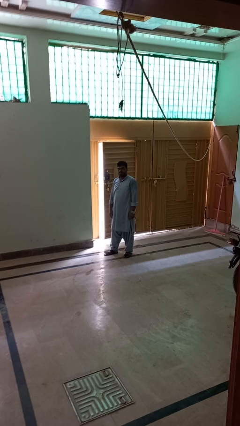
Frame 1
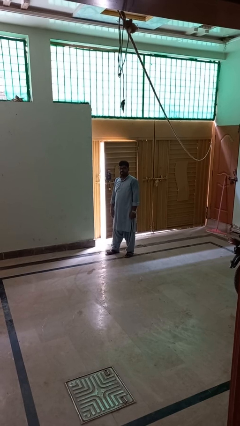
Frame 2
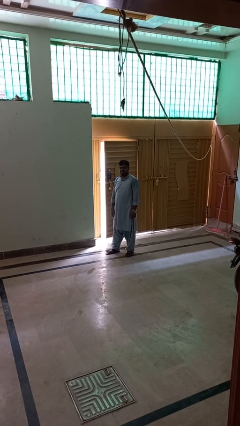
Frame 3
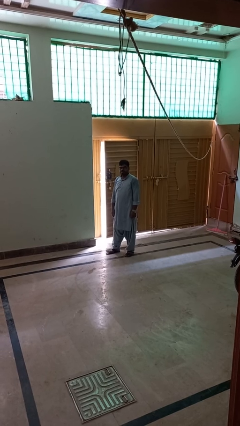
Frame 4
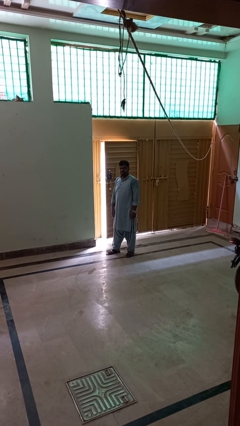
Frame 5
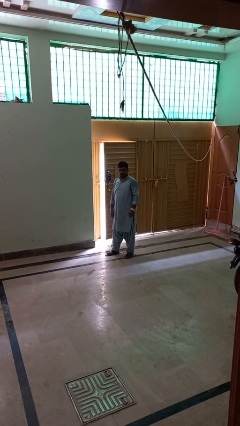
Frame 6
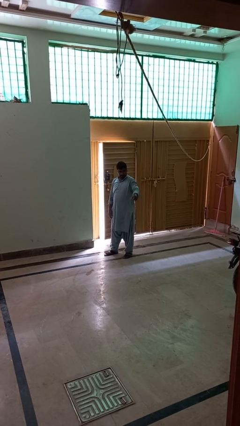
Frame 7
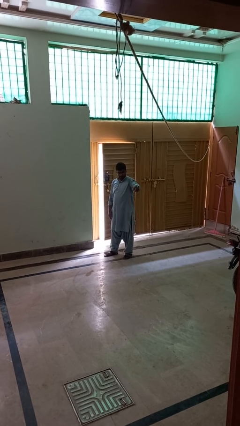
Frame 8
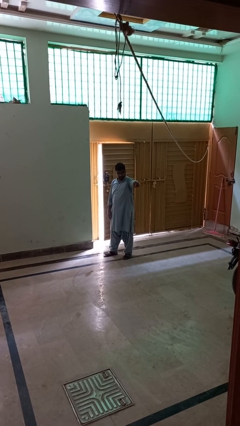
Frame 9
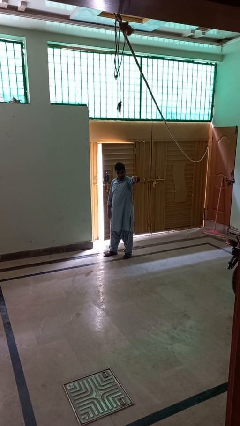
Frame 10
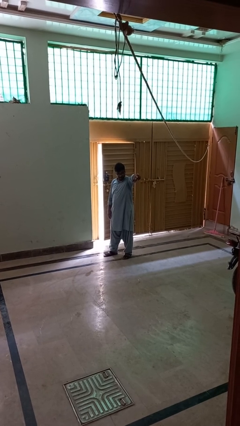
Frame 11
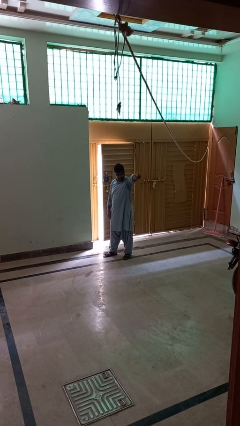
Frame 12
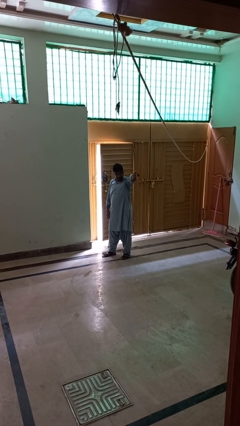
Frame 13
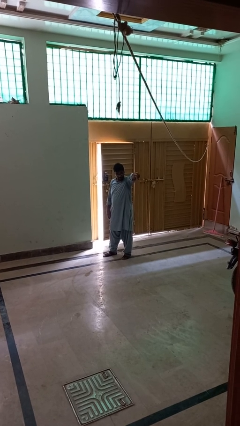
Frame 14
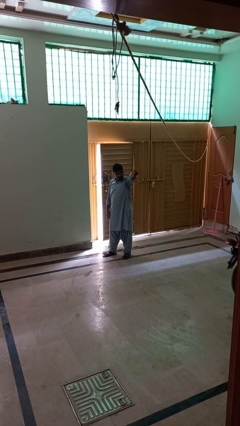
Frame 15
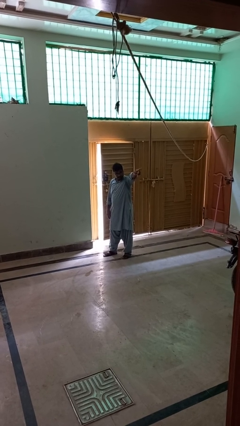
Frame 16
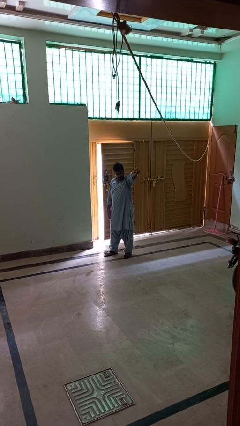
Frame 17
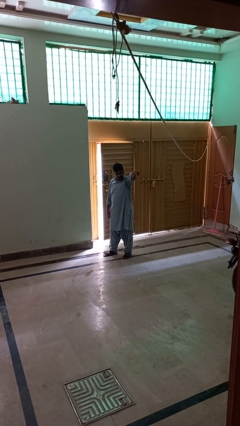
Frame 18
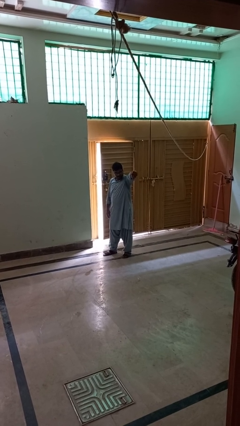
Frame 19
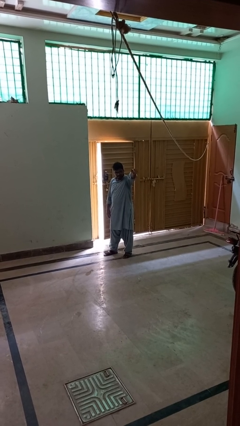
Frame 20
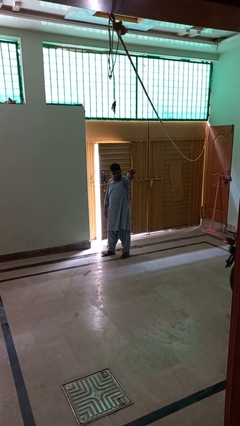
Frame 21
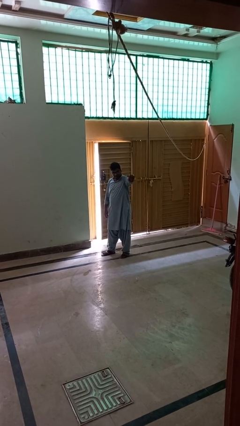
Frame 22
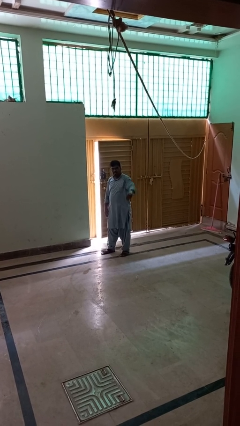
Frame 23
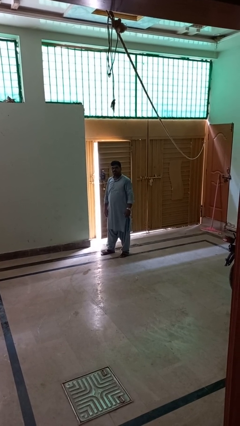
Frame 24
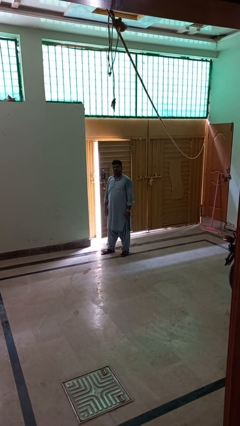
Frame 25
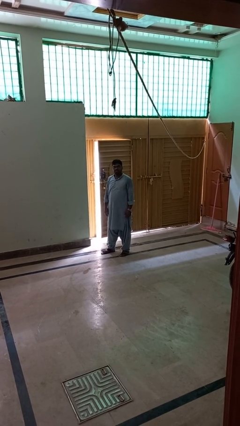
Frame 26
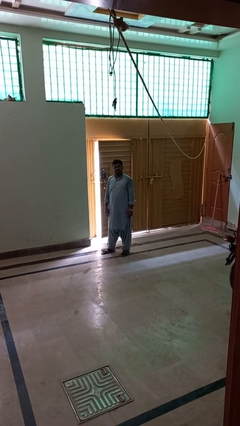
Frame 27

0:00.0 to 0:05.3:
person gestures come here

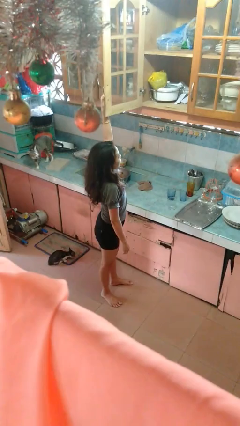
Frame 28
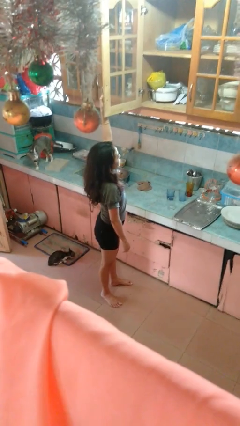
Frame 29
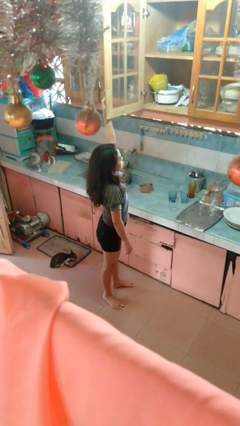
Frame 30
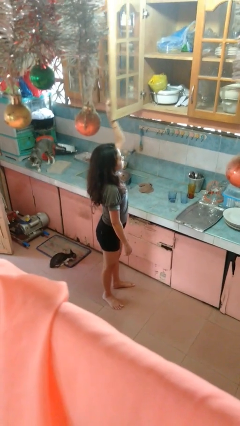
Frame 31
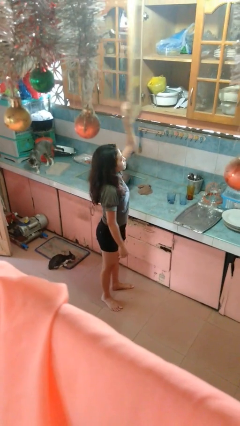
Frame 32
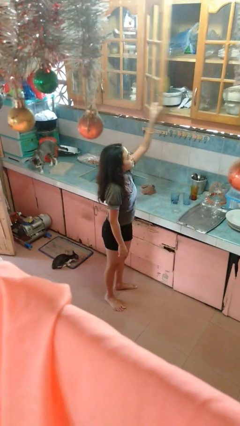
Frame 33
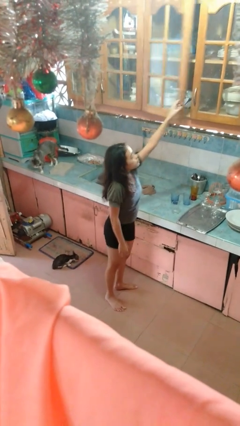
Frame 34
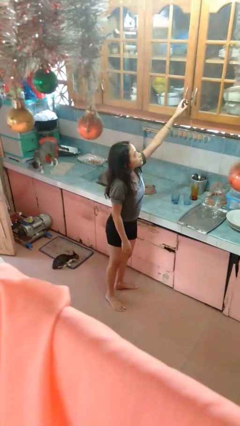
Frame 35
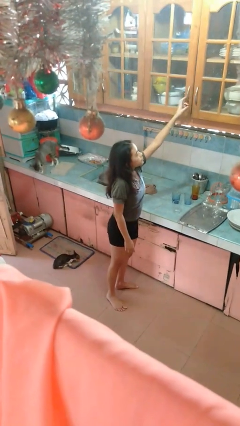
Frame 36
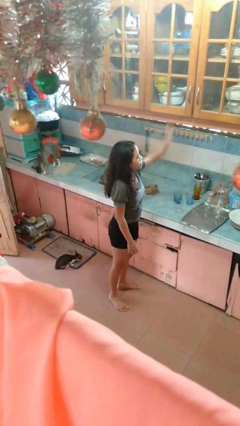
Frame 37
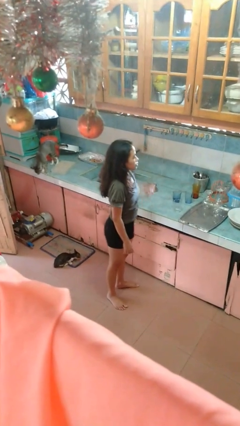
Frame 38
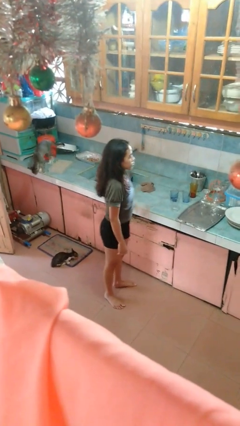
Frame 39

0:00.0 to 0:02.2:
person closes cabinet

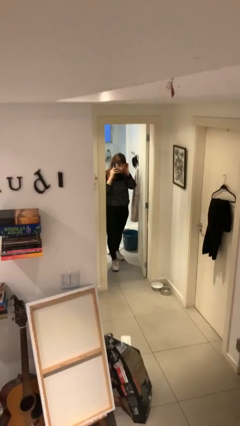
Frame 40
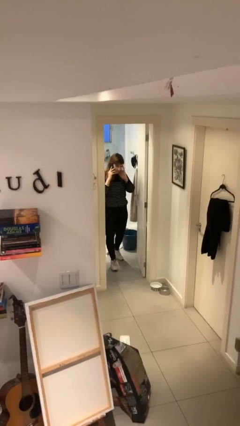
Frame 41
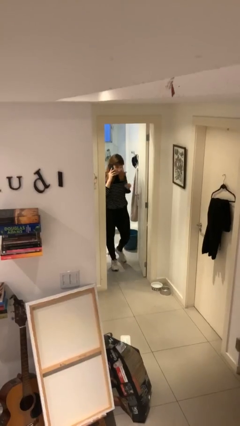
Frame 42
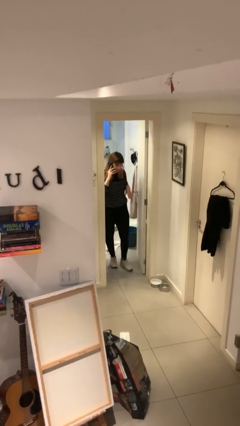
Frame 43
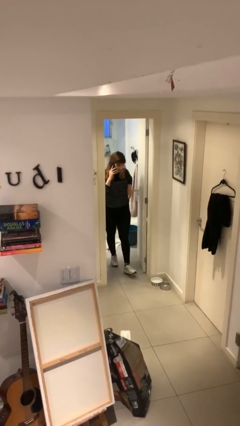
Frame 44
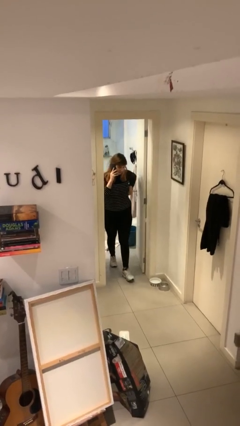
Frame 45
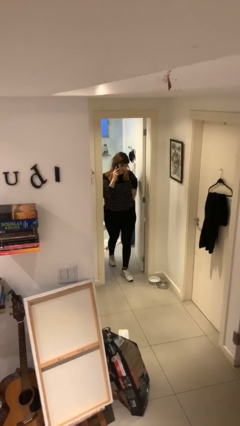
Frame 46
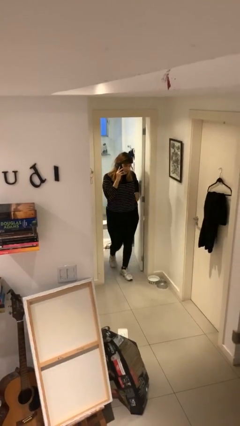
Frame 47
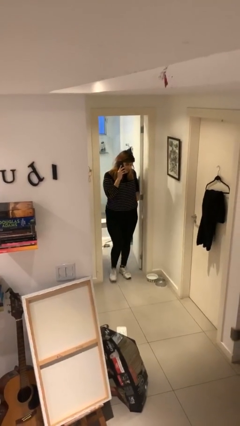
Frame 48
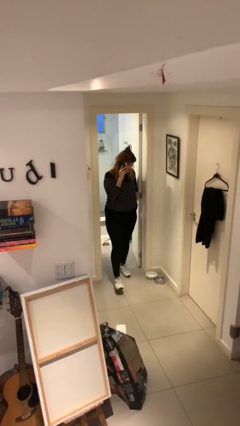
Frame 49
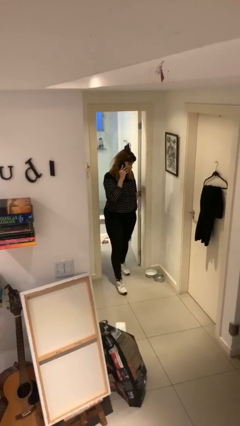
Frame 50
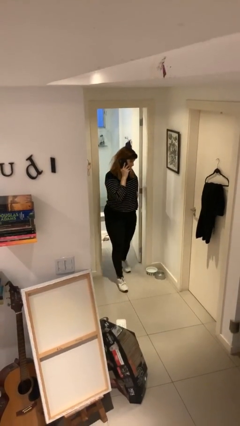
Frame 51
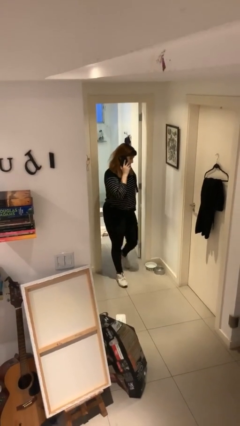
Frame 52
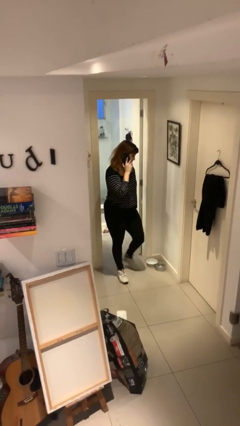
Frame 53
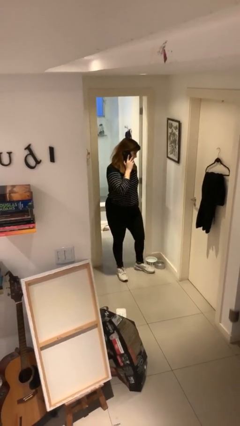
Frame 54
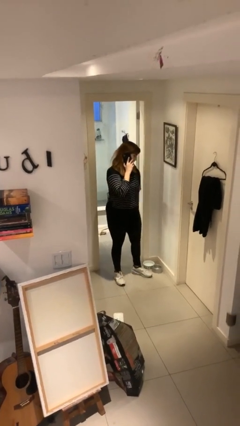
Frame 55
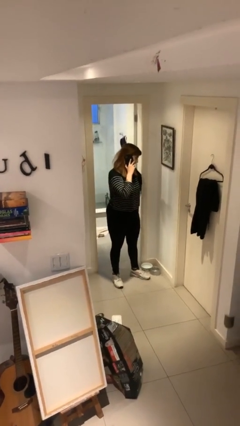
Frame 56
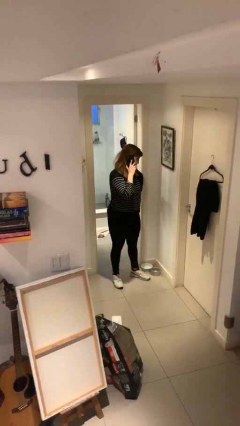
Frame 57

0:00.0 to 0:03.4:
person enters scene through structure

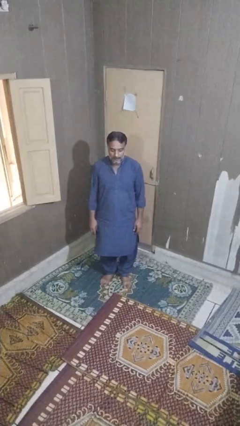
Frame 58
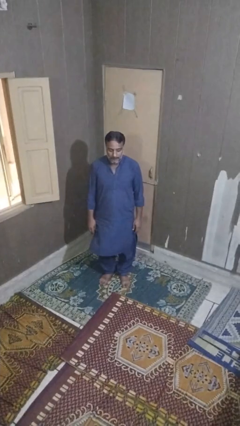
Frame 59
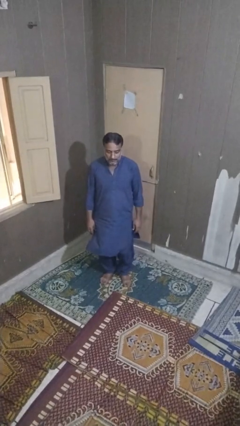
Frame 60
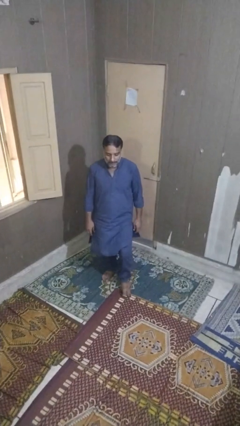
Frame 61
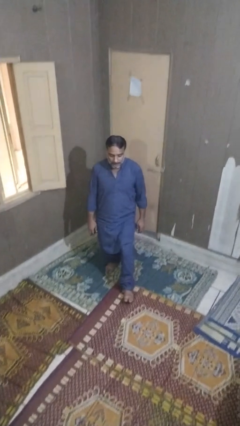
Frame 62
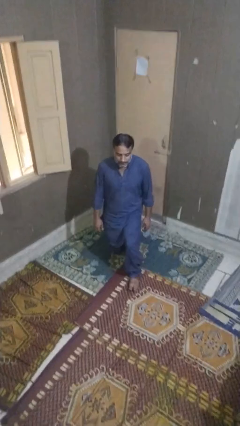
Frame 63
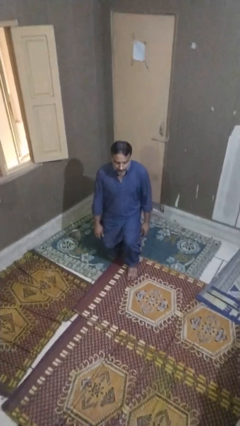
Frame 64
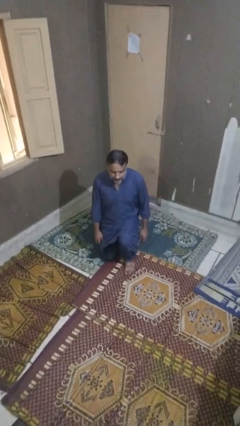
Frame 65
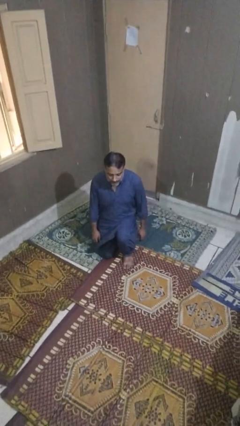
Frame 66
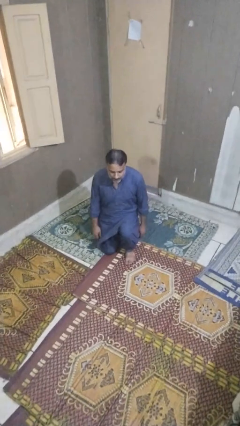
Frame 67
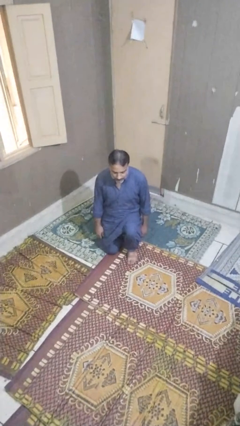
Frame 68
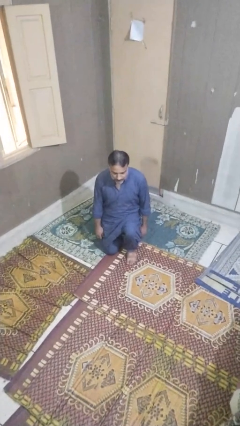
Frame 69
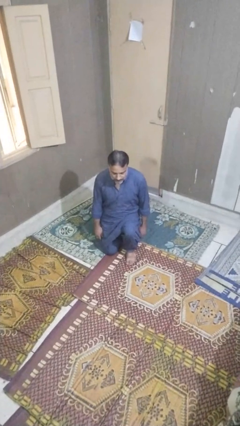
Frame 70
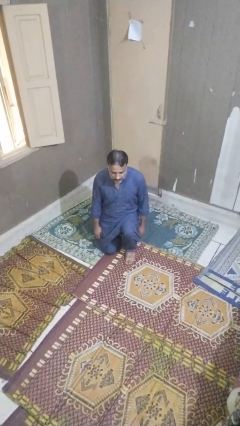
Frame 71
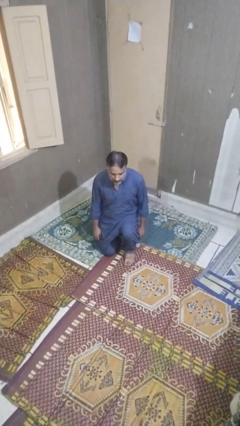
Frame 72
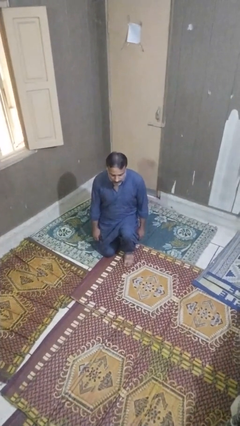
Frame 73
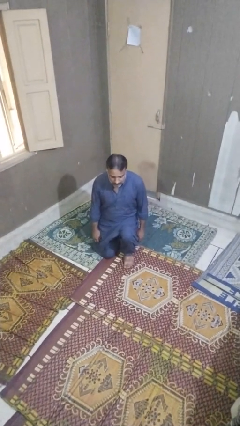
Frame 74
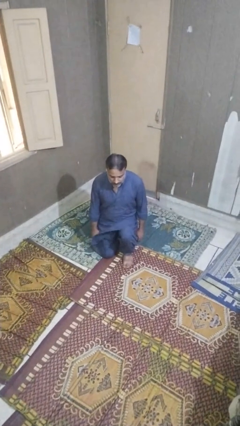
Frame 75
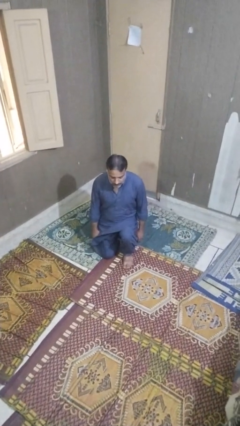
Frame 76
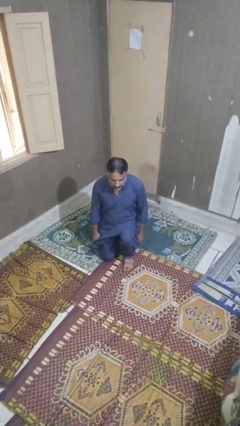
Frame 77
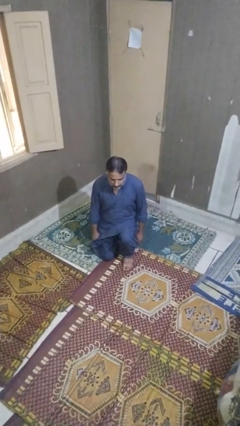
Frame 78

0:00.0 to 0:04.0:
person exercises with lunges

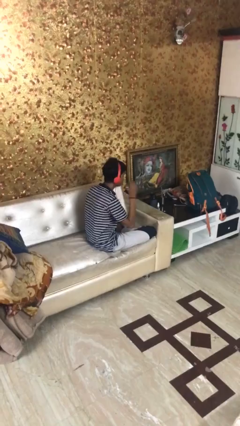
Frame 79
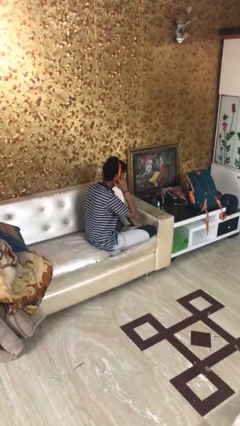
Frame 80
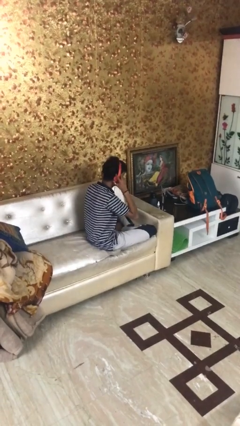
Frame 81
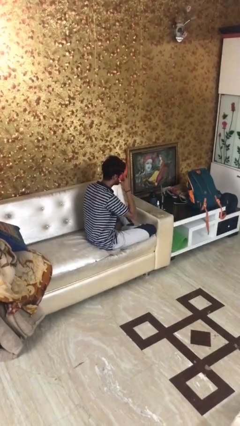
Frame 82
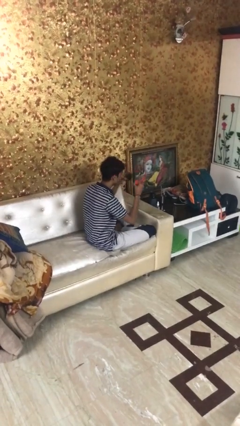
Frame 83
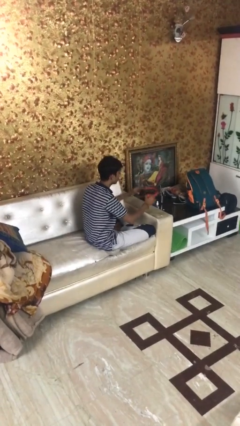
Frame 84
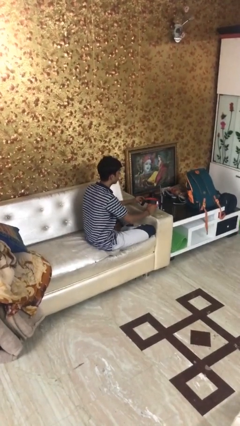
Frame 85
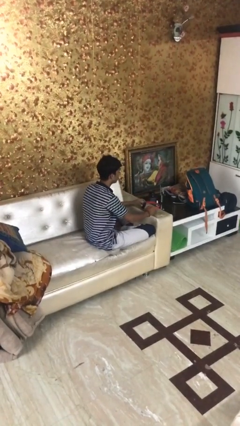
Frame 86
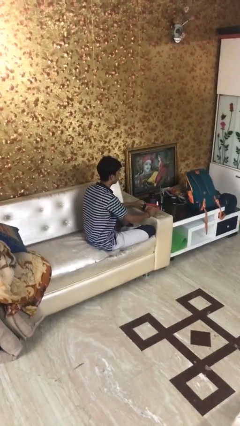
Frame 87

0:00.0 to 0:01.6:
person takes off headphones

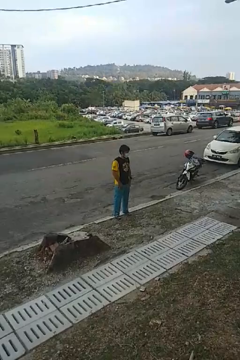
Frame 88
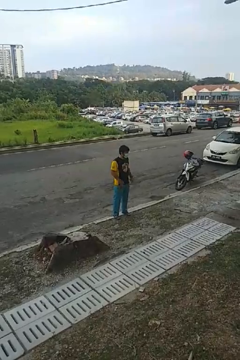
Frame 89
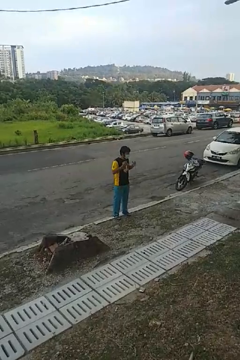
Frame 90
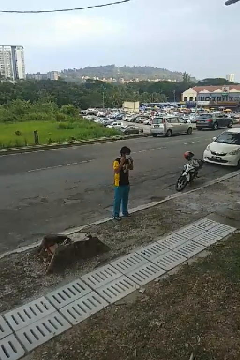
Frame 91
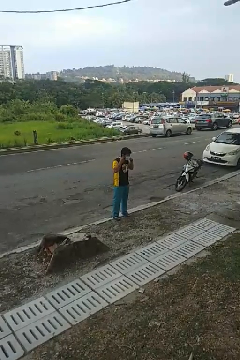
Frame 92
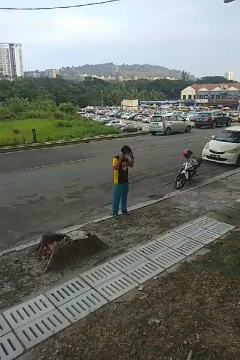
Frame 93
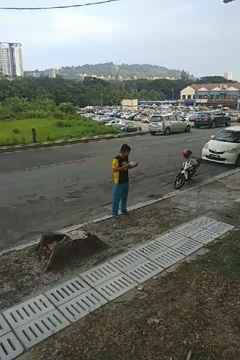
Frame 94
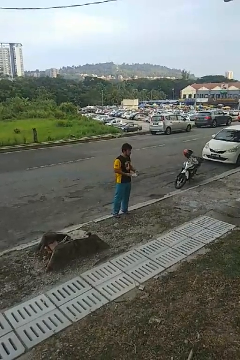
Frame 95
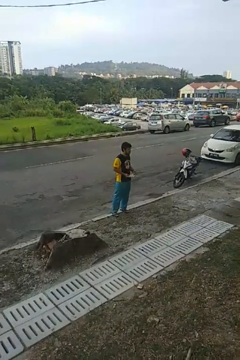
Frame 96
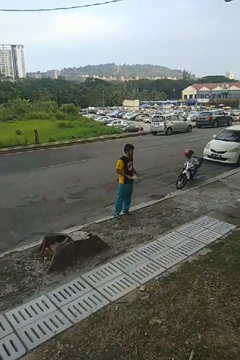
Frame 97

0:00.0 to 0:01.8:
person takes off facemask
